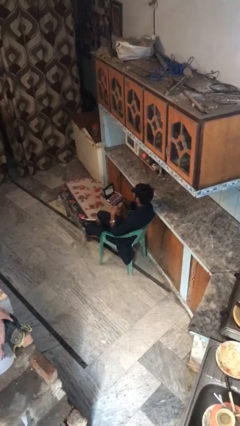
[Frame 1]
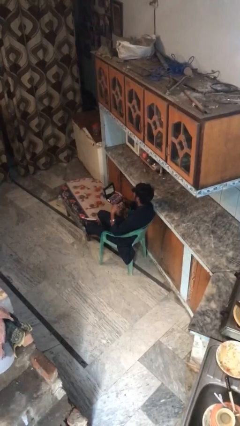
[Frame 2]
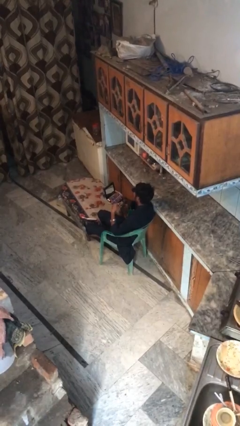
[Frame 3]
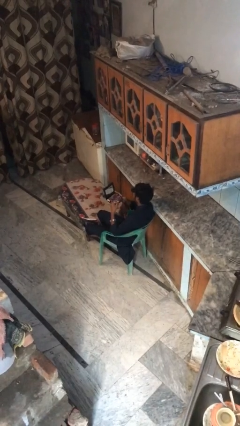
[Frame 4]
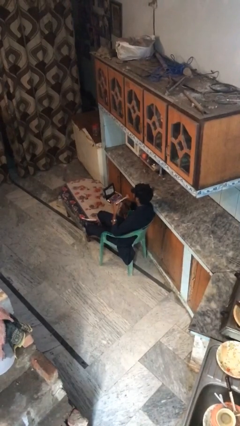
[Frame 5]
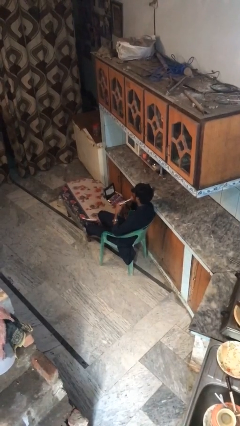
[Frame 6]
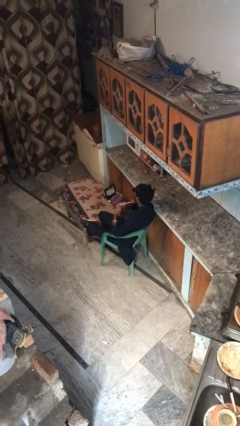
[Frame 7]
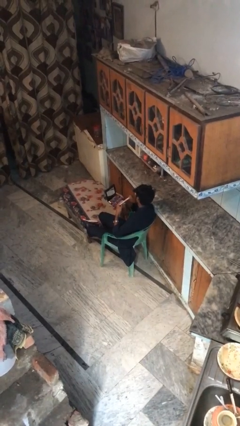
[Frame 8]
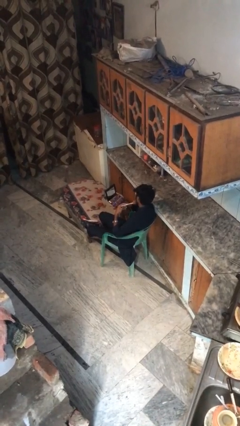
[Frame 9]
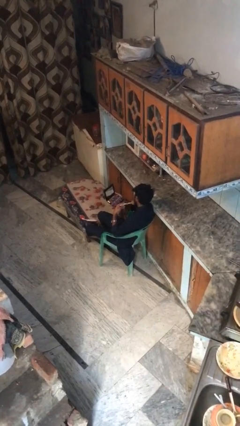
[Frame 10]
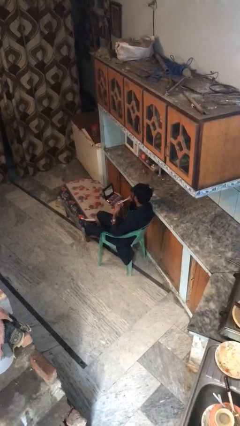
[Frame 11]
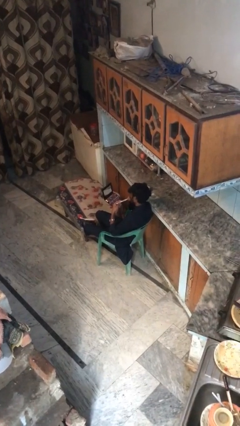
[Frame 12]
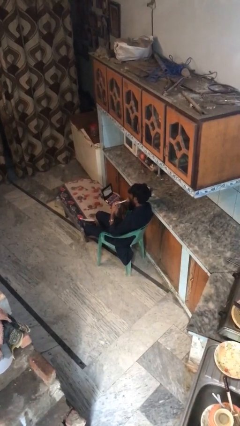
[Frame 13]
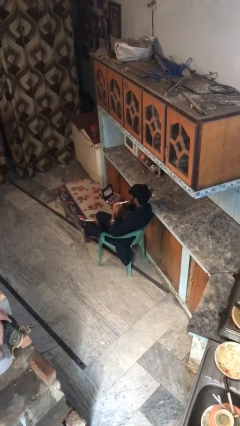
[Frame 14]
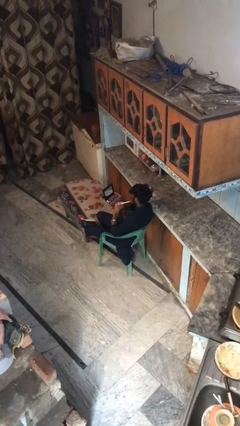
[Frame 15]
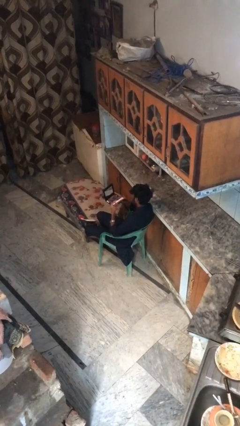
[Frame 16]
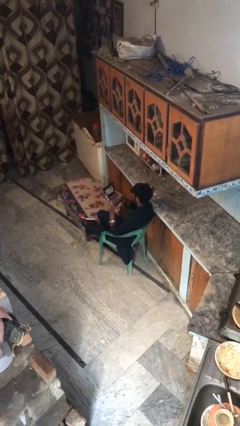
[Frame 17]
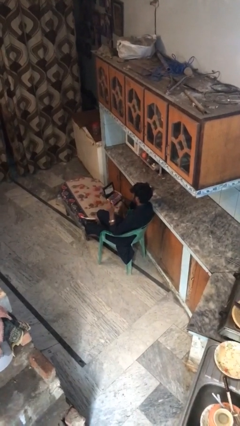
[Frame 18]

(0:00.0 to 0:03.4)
person applies foundation makeup

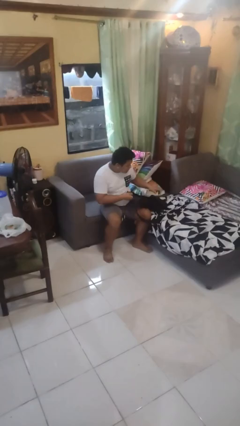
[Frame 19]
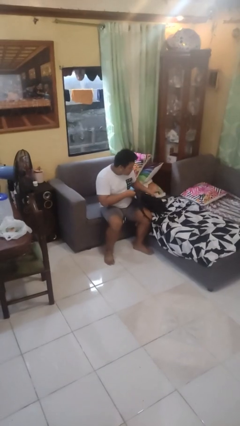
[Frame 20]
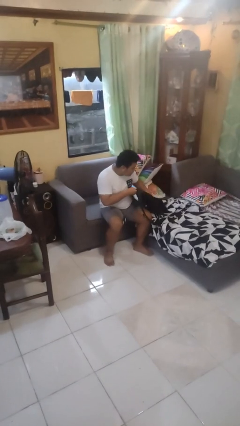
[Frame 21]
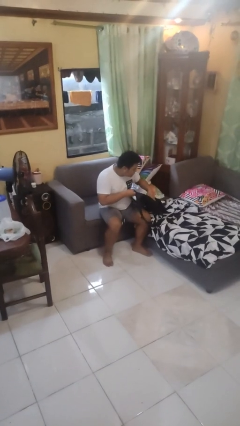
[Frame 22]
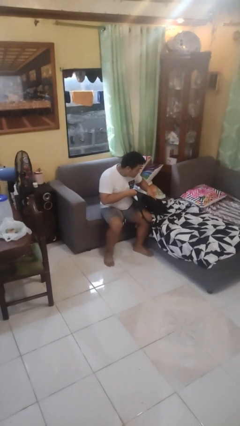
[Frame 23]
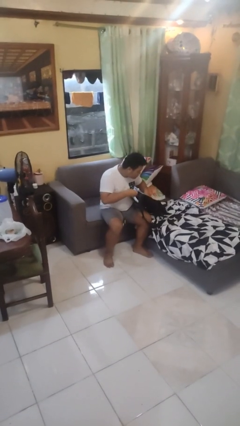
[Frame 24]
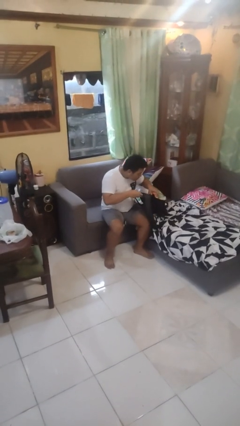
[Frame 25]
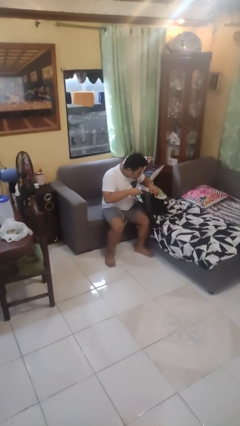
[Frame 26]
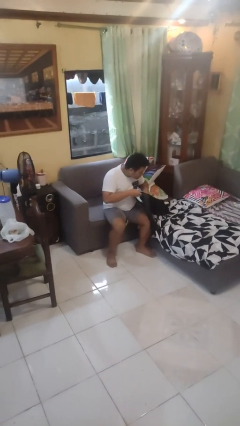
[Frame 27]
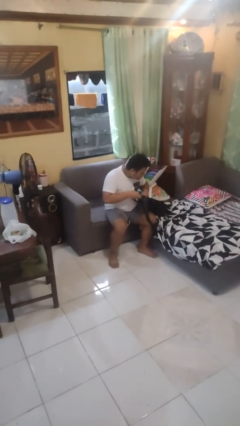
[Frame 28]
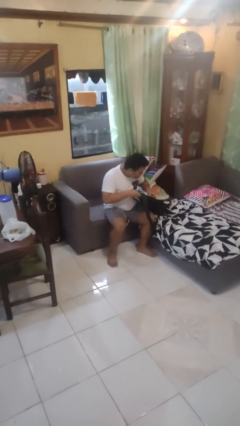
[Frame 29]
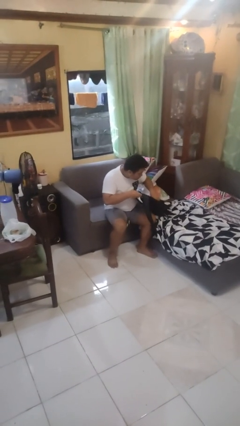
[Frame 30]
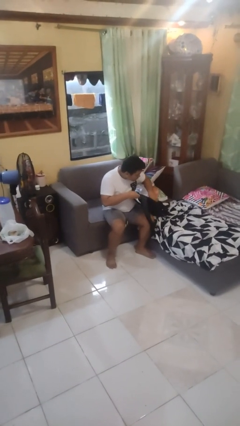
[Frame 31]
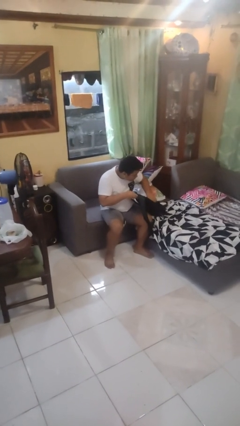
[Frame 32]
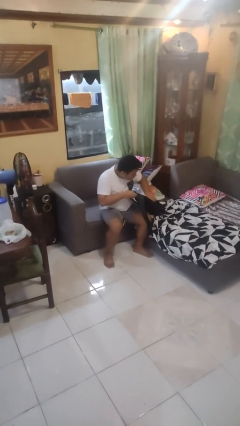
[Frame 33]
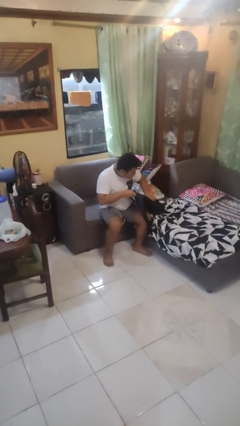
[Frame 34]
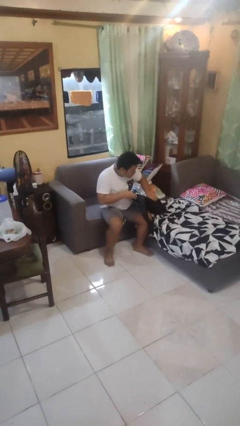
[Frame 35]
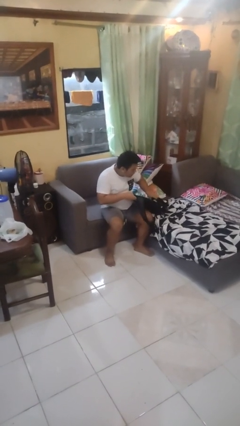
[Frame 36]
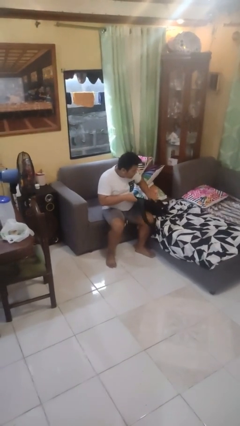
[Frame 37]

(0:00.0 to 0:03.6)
person searches in backpack

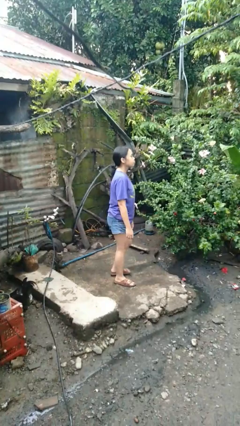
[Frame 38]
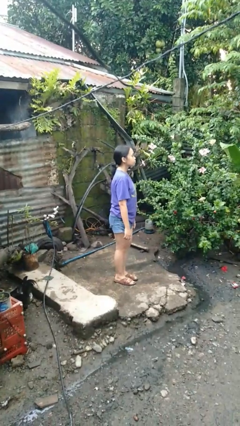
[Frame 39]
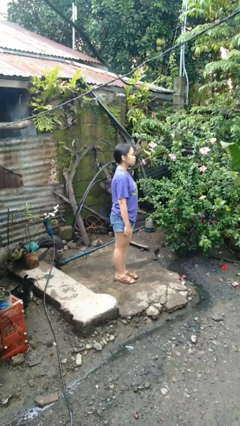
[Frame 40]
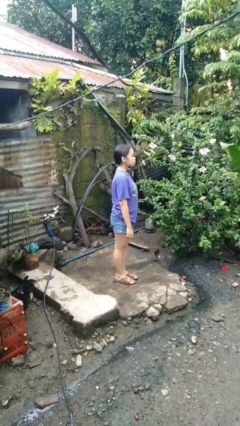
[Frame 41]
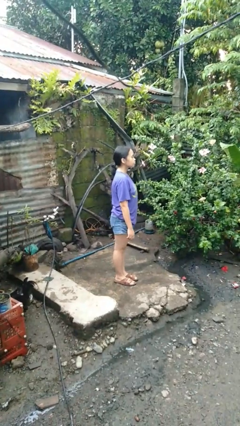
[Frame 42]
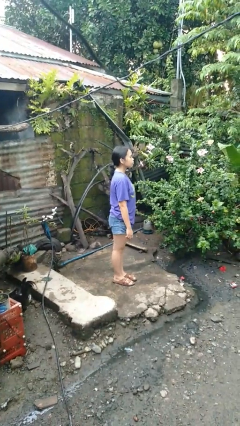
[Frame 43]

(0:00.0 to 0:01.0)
person shrugs

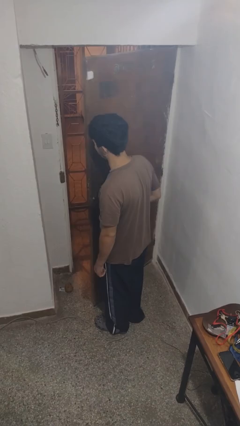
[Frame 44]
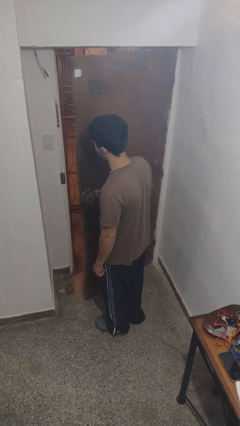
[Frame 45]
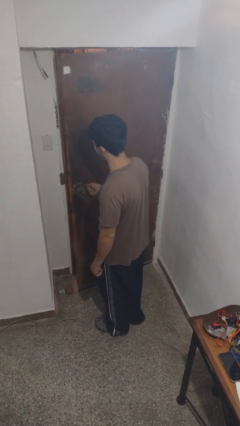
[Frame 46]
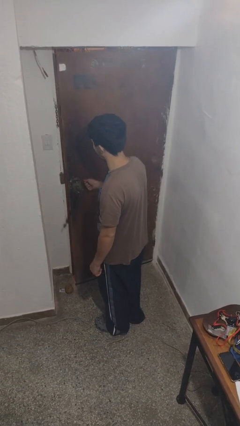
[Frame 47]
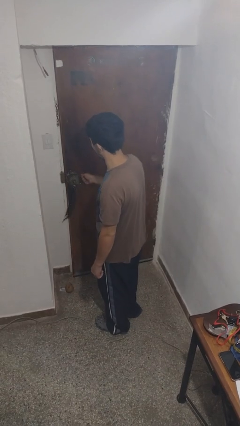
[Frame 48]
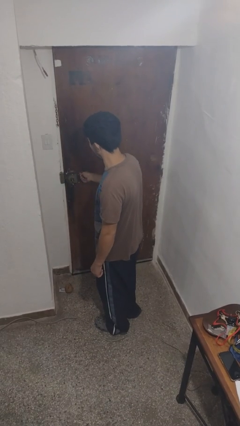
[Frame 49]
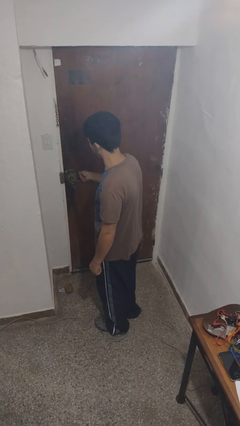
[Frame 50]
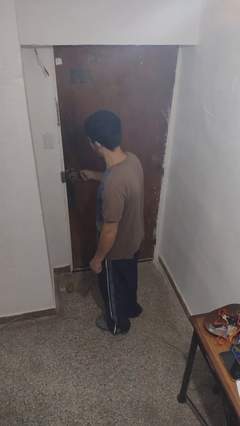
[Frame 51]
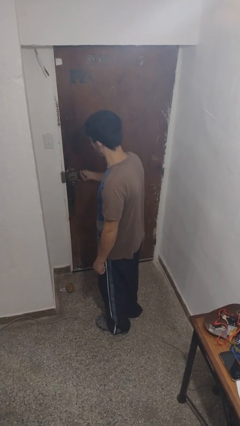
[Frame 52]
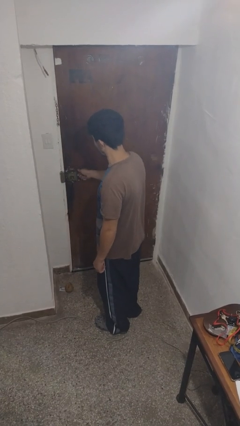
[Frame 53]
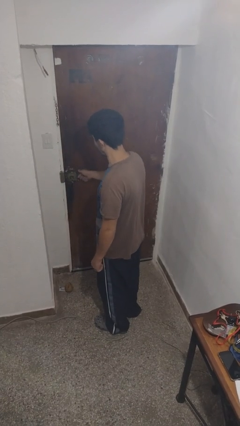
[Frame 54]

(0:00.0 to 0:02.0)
person closes facility door

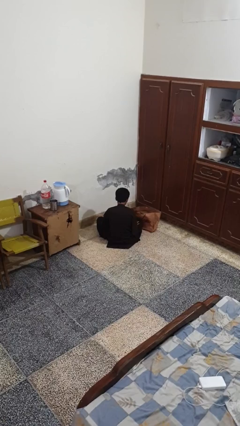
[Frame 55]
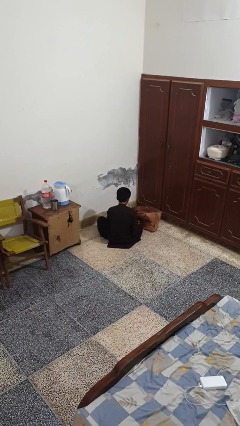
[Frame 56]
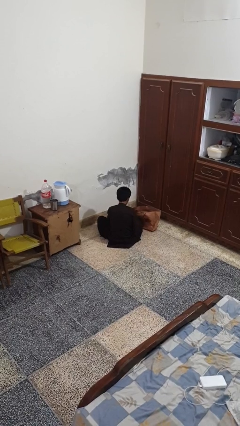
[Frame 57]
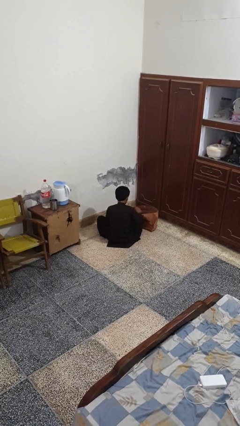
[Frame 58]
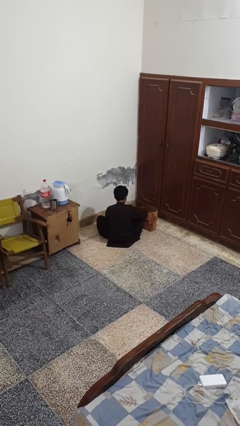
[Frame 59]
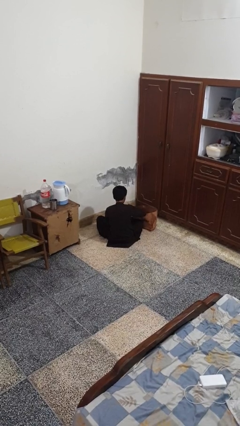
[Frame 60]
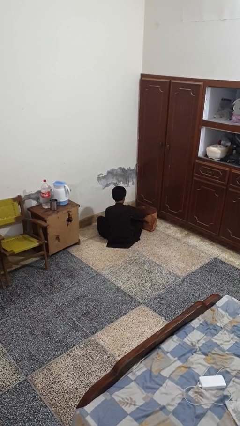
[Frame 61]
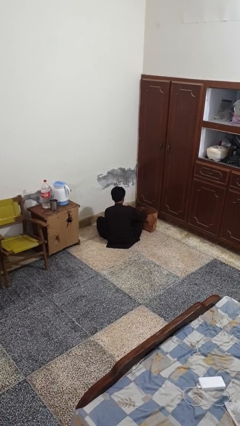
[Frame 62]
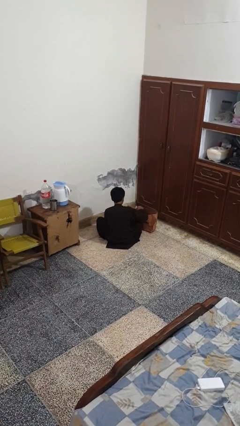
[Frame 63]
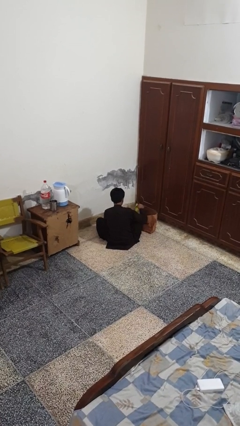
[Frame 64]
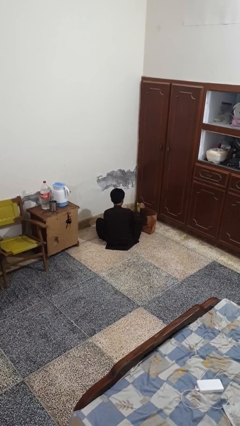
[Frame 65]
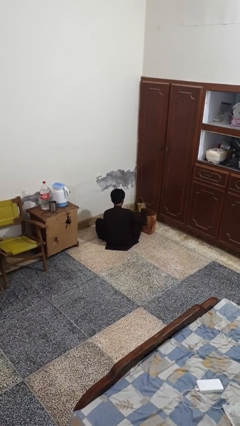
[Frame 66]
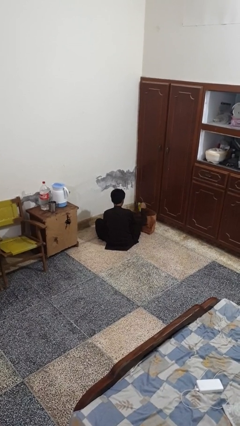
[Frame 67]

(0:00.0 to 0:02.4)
person takes object from bag

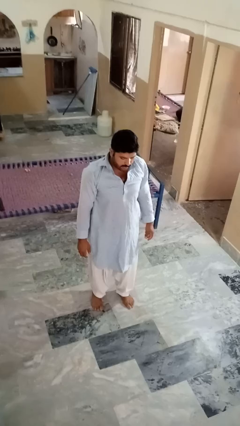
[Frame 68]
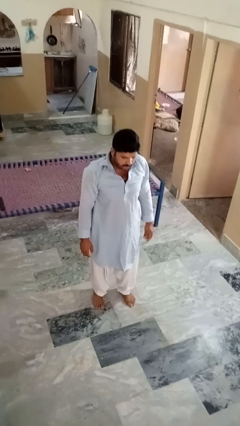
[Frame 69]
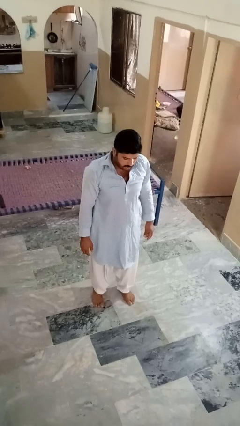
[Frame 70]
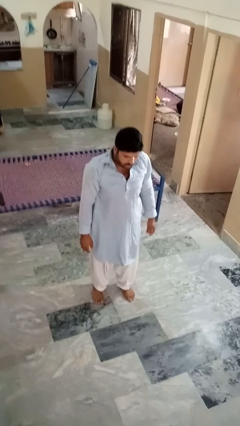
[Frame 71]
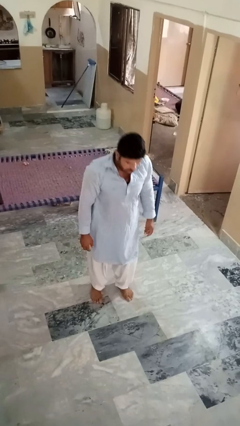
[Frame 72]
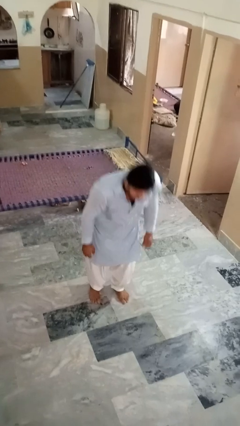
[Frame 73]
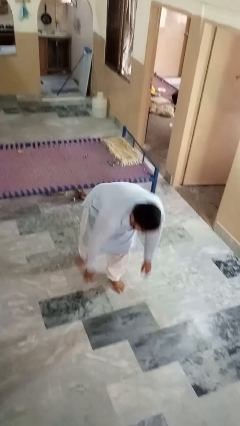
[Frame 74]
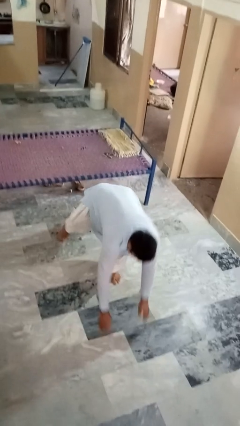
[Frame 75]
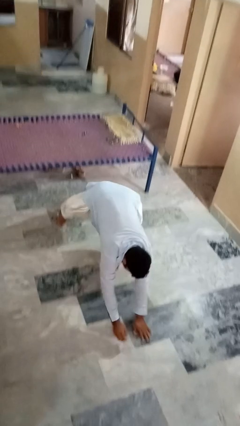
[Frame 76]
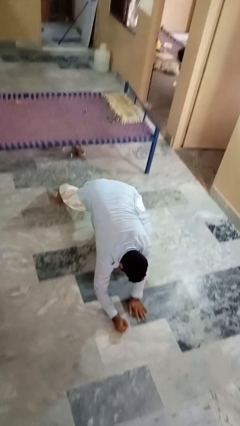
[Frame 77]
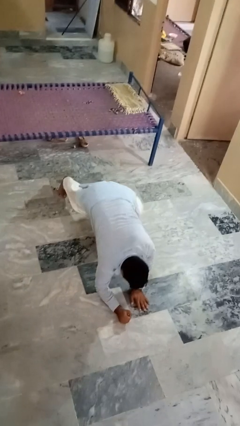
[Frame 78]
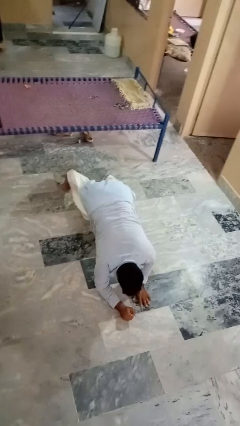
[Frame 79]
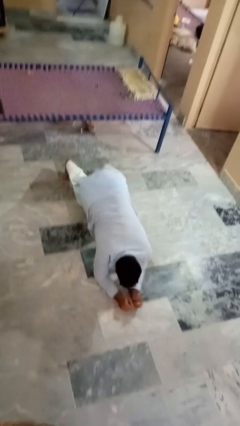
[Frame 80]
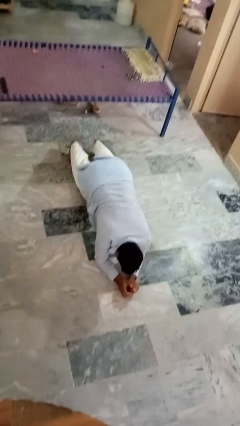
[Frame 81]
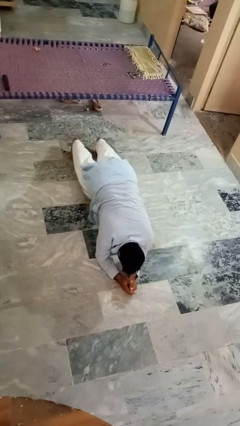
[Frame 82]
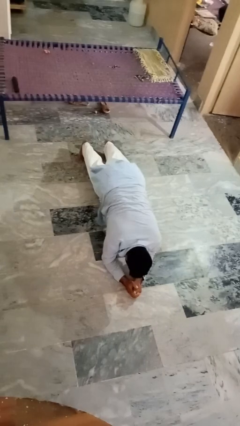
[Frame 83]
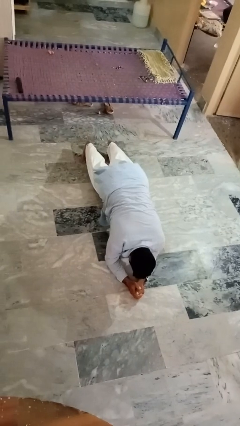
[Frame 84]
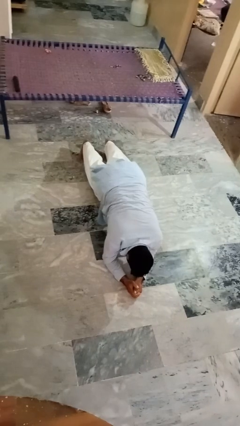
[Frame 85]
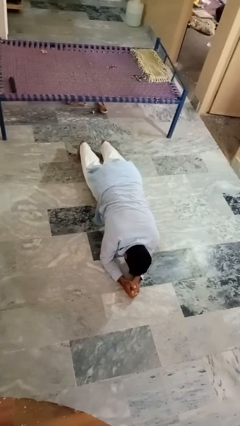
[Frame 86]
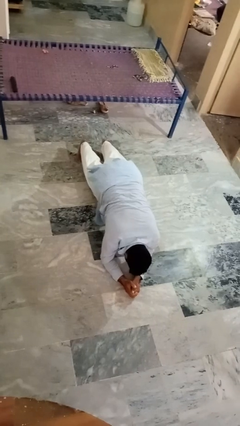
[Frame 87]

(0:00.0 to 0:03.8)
person exercises with plank

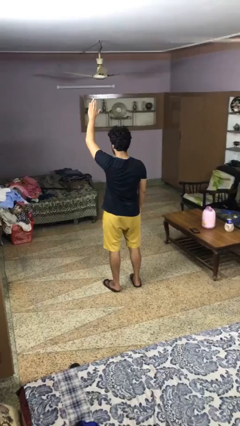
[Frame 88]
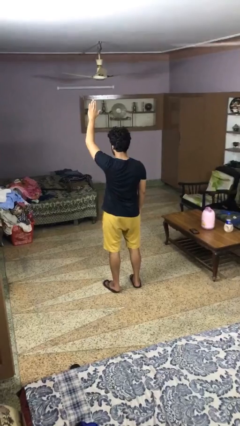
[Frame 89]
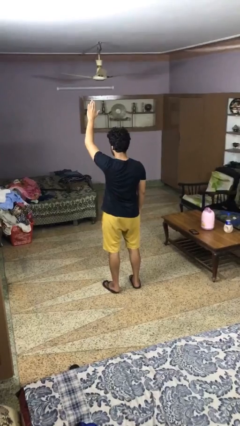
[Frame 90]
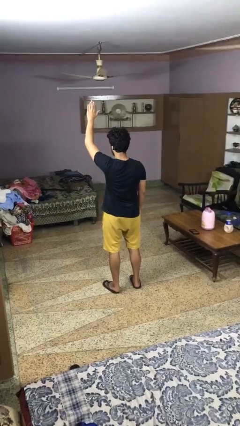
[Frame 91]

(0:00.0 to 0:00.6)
person gestures lower hand
